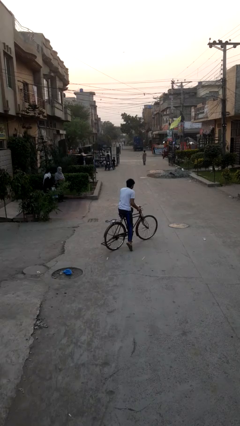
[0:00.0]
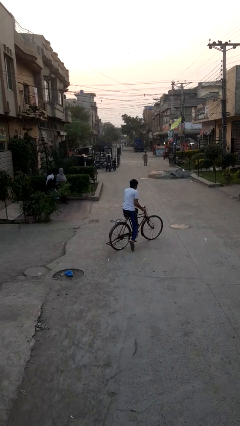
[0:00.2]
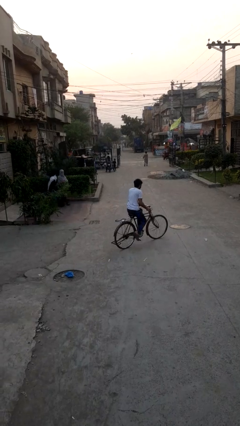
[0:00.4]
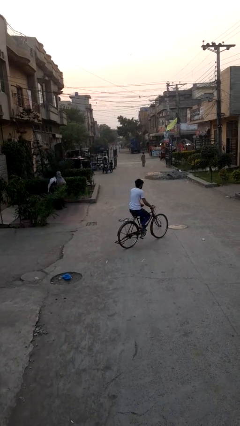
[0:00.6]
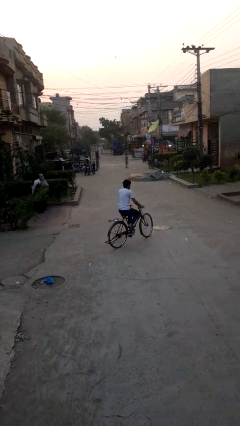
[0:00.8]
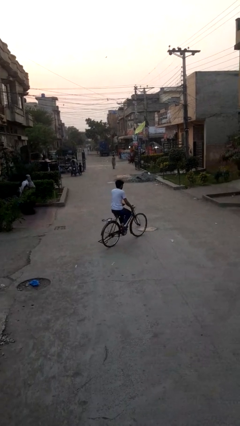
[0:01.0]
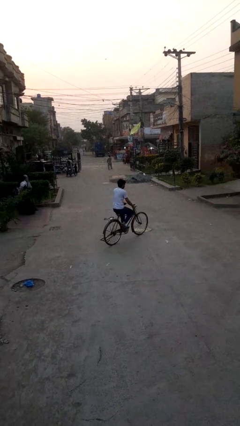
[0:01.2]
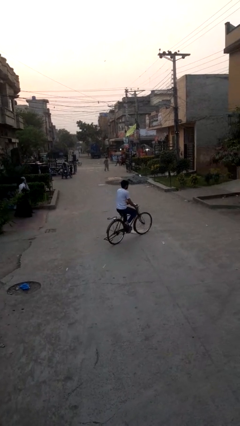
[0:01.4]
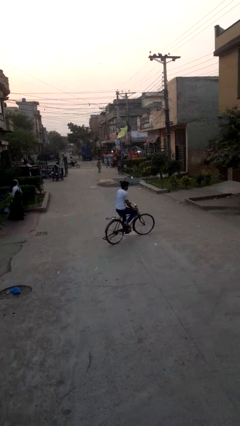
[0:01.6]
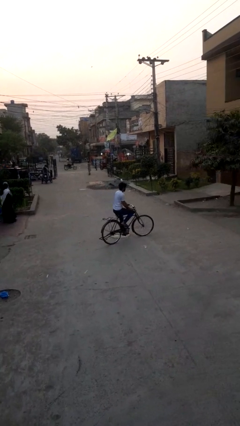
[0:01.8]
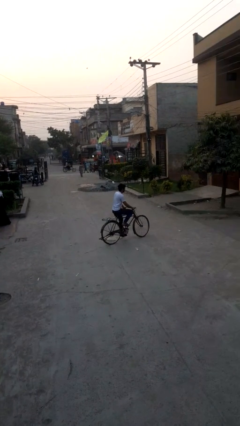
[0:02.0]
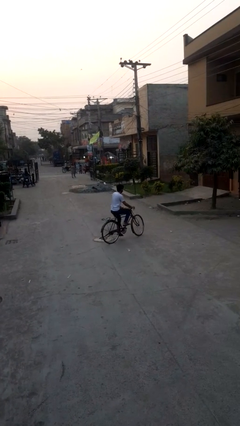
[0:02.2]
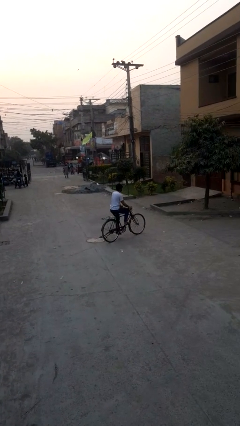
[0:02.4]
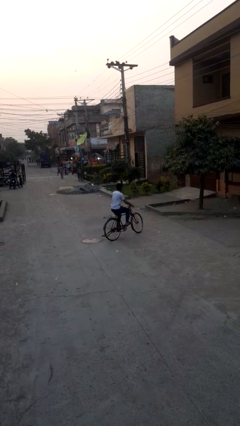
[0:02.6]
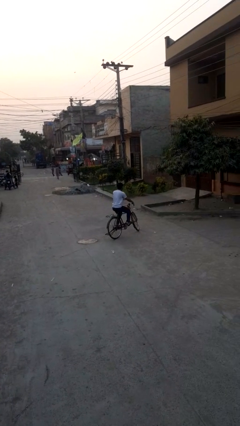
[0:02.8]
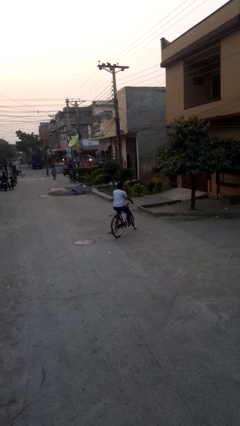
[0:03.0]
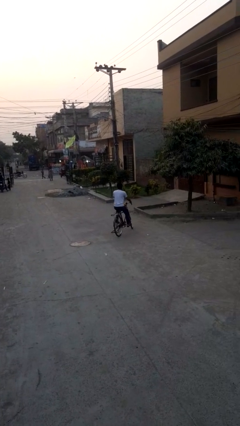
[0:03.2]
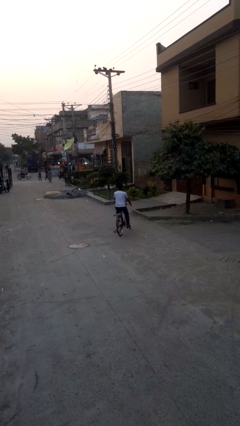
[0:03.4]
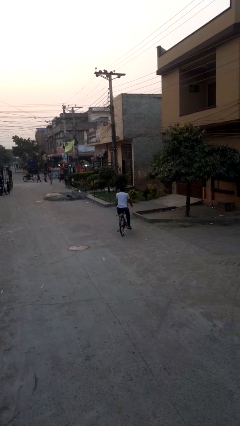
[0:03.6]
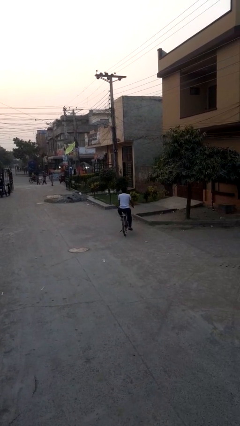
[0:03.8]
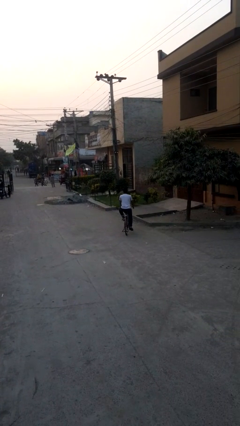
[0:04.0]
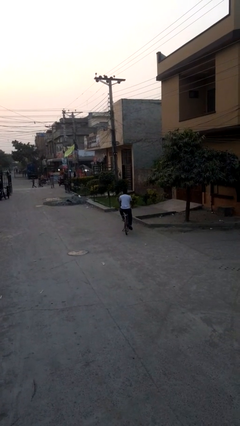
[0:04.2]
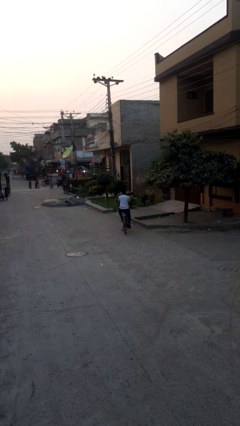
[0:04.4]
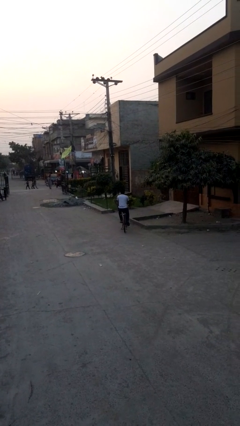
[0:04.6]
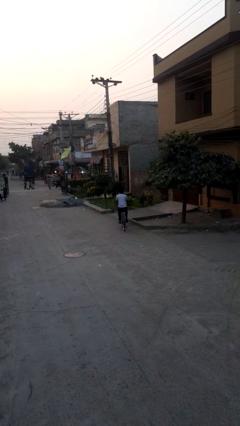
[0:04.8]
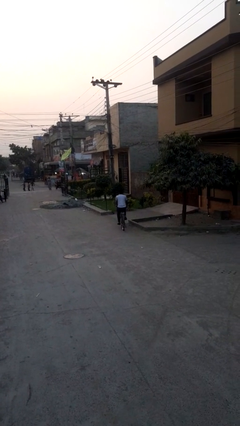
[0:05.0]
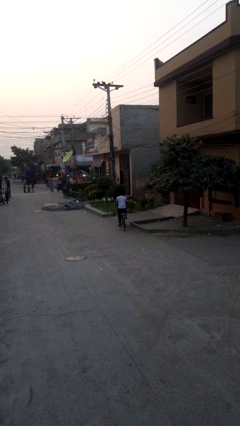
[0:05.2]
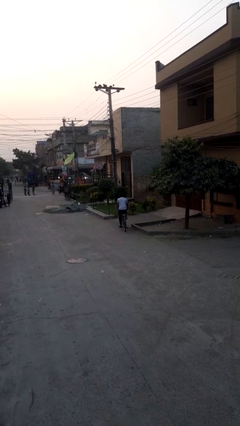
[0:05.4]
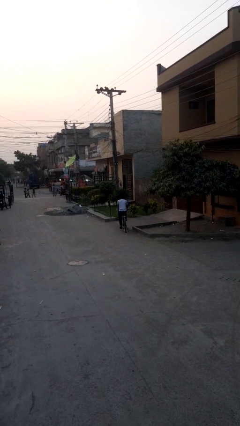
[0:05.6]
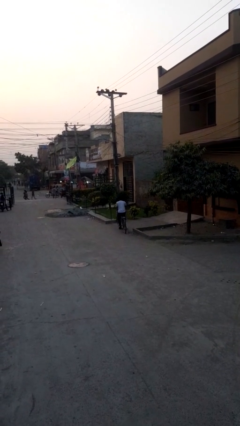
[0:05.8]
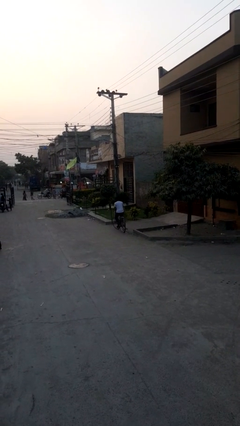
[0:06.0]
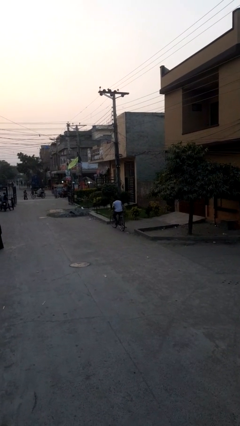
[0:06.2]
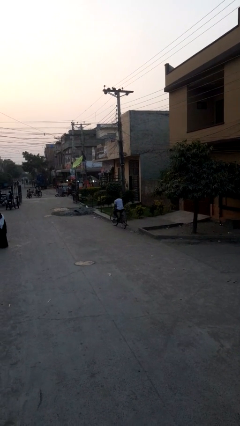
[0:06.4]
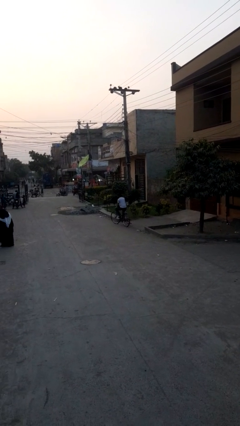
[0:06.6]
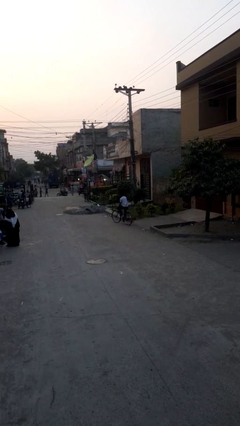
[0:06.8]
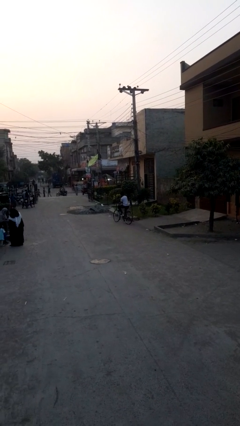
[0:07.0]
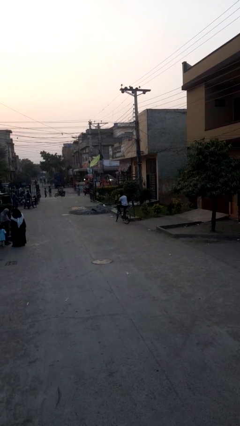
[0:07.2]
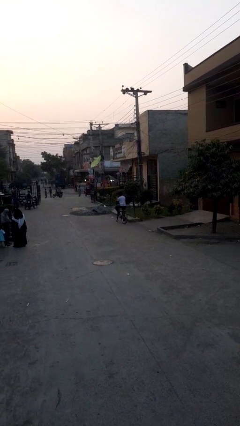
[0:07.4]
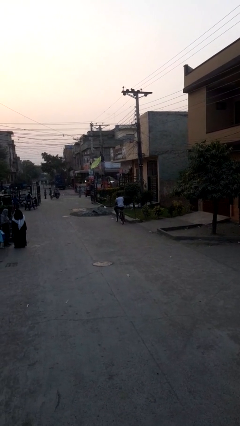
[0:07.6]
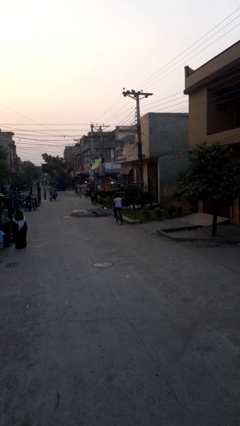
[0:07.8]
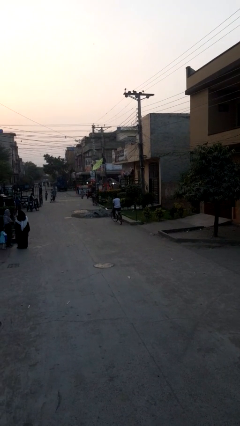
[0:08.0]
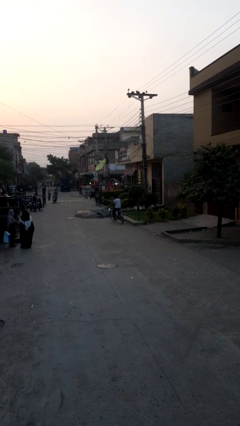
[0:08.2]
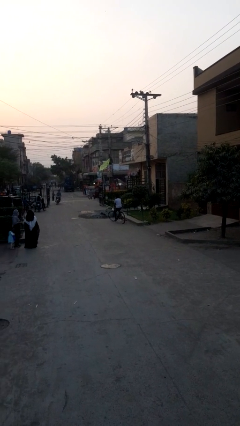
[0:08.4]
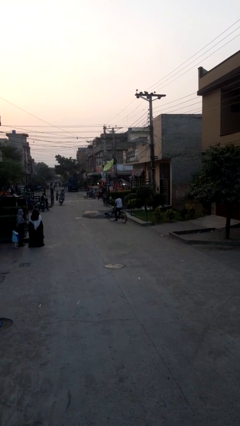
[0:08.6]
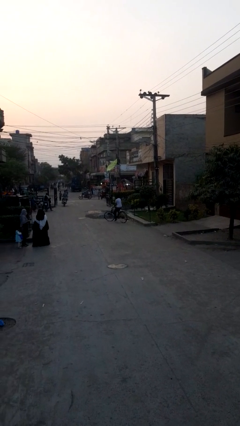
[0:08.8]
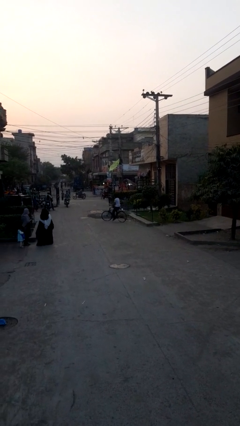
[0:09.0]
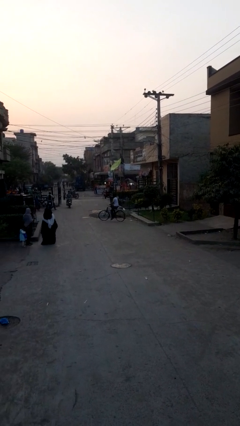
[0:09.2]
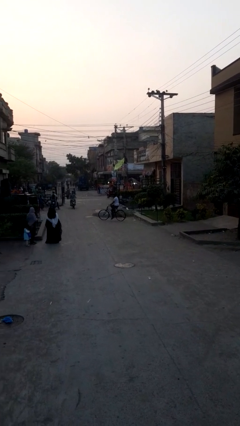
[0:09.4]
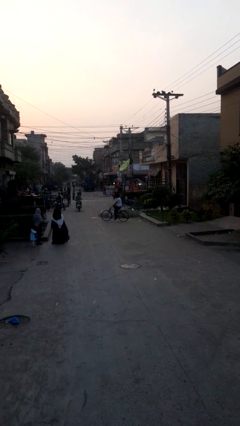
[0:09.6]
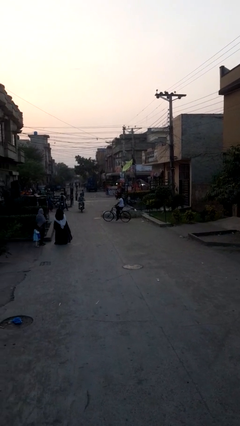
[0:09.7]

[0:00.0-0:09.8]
person rides bicycle

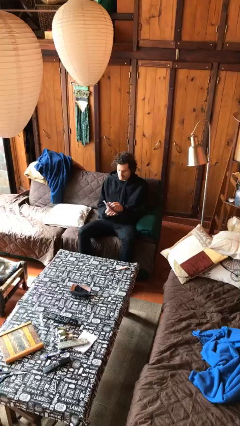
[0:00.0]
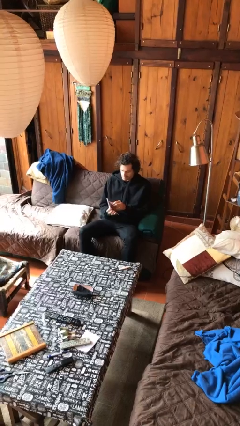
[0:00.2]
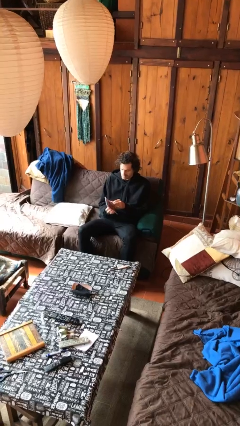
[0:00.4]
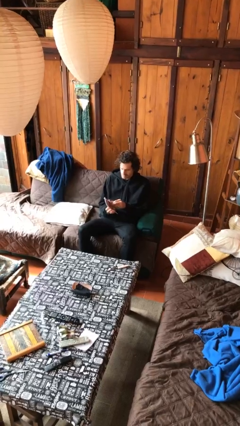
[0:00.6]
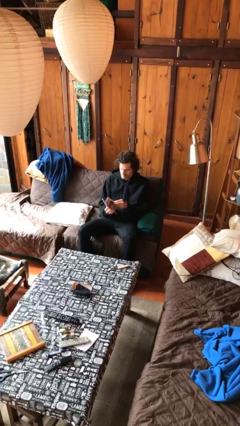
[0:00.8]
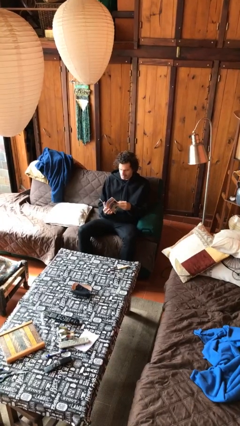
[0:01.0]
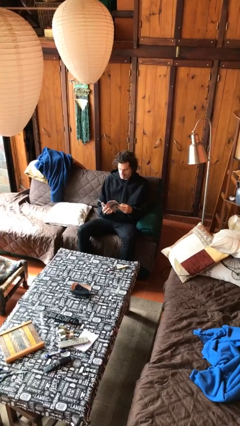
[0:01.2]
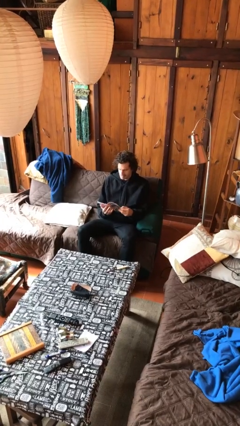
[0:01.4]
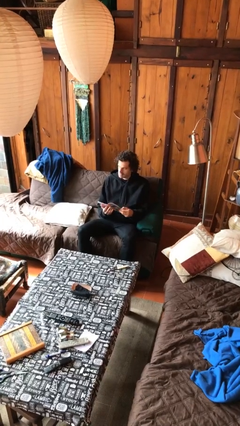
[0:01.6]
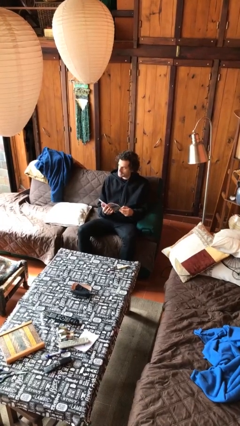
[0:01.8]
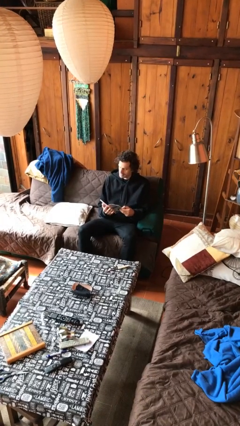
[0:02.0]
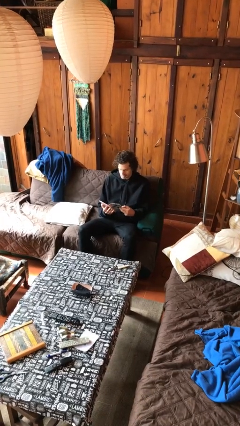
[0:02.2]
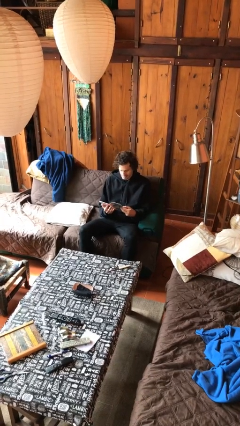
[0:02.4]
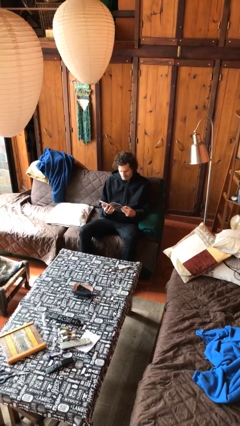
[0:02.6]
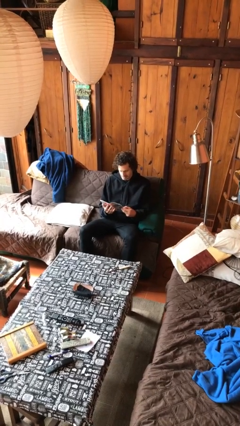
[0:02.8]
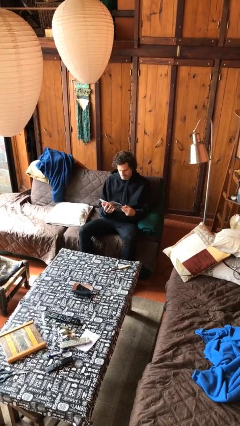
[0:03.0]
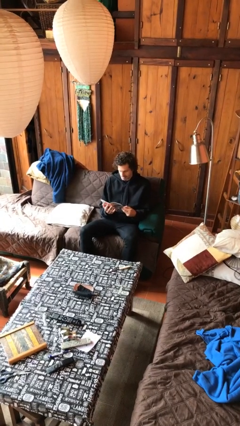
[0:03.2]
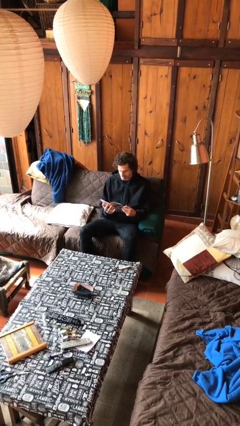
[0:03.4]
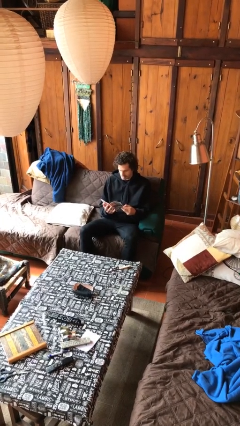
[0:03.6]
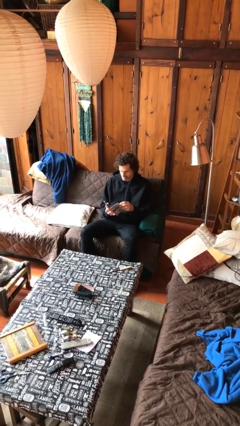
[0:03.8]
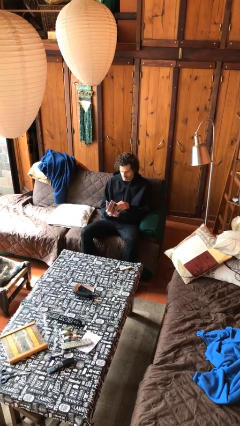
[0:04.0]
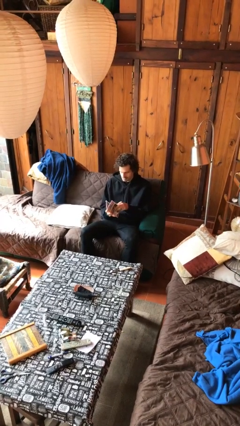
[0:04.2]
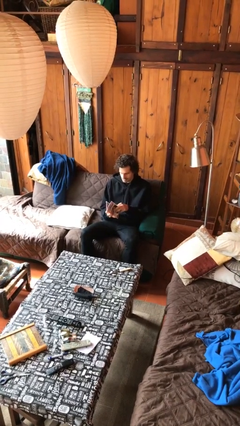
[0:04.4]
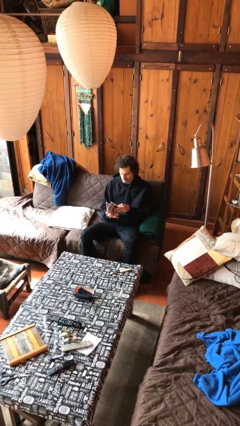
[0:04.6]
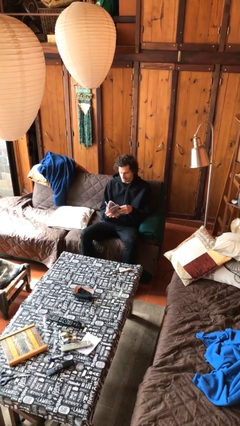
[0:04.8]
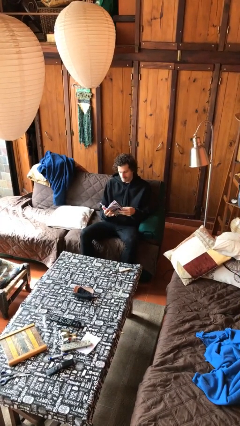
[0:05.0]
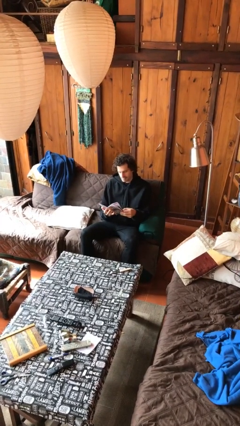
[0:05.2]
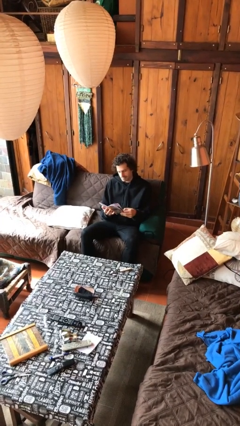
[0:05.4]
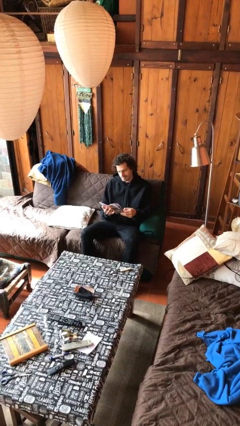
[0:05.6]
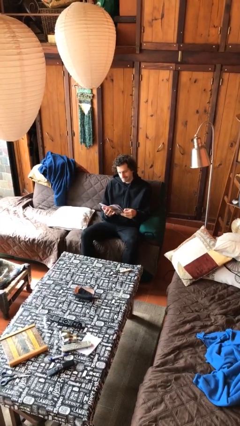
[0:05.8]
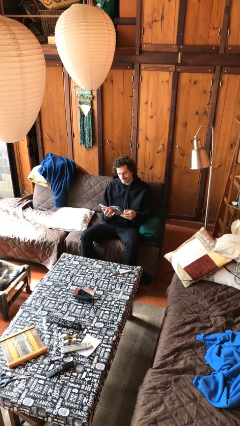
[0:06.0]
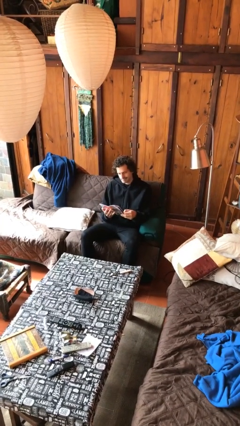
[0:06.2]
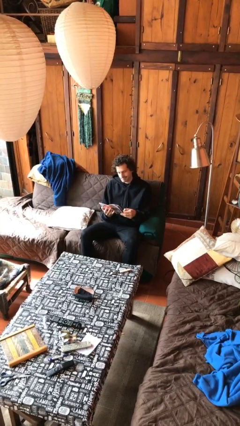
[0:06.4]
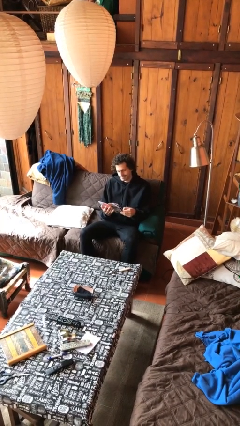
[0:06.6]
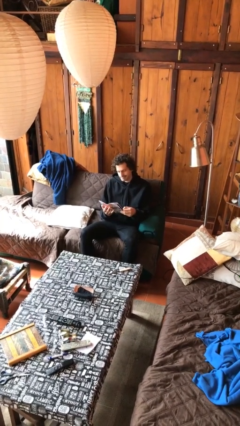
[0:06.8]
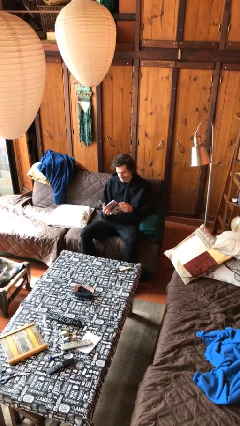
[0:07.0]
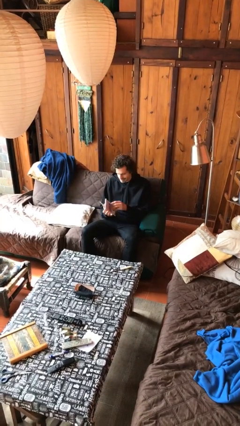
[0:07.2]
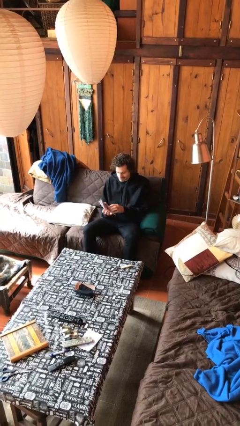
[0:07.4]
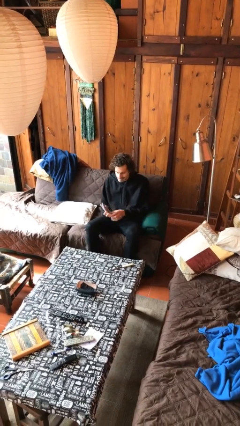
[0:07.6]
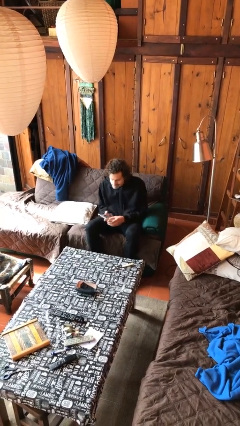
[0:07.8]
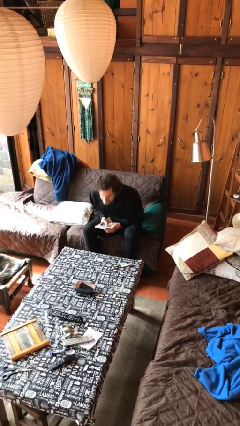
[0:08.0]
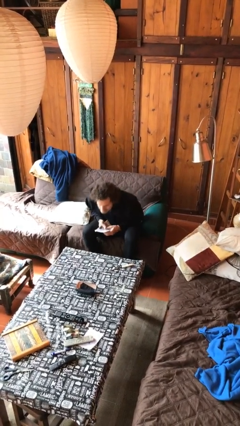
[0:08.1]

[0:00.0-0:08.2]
person reads document

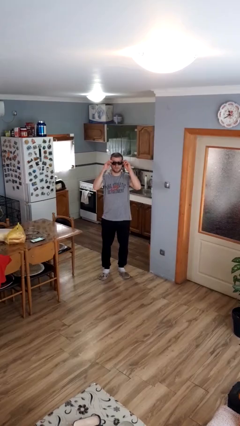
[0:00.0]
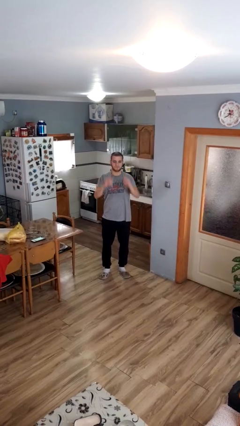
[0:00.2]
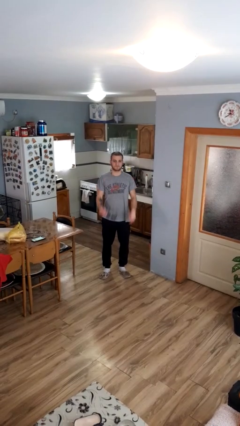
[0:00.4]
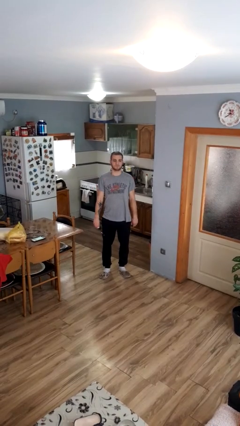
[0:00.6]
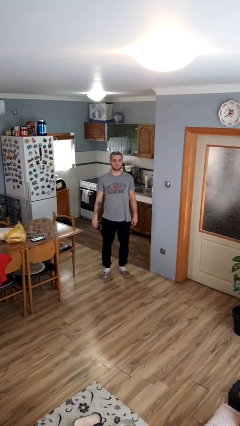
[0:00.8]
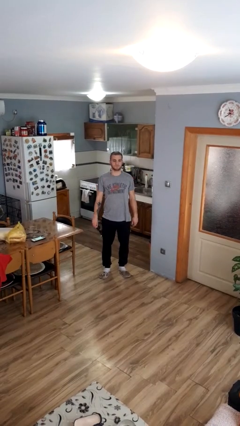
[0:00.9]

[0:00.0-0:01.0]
person takes off sunglasses
